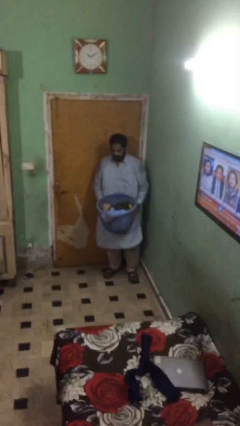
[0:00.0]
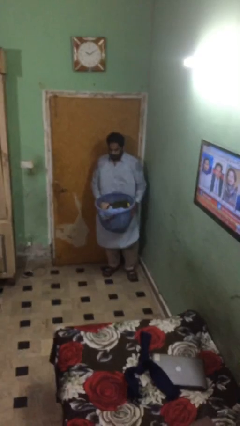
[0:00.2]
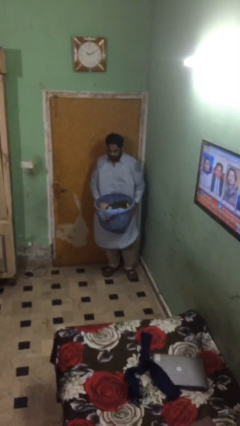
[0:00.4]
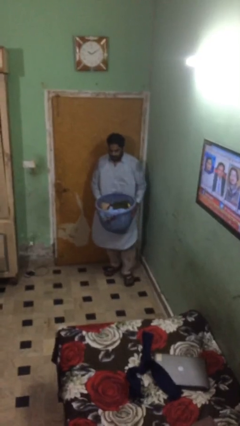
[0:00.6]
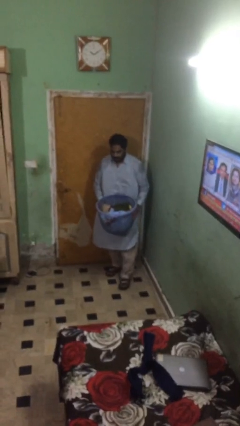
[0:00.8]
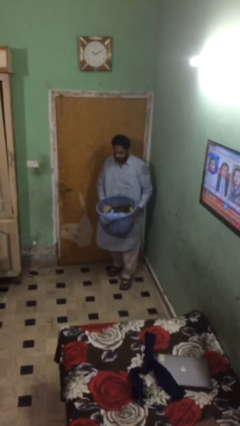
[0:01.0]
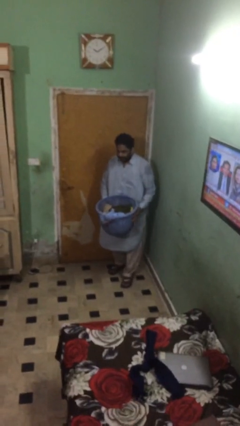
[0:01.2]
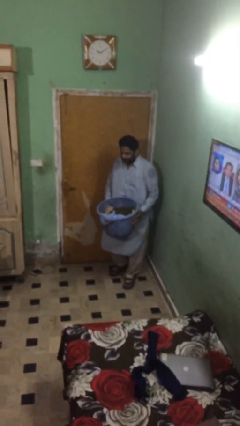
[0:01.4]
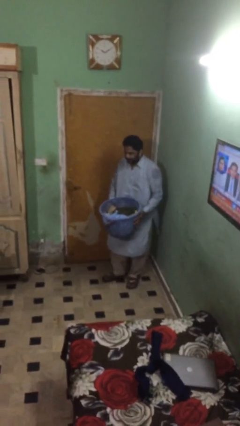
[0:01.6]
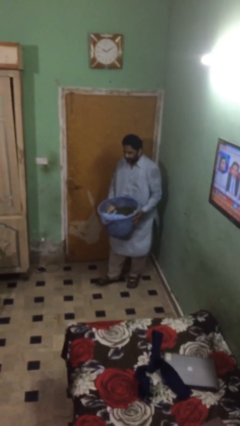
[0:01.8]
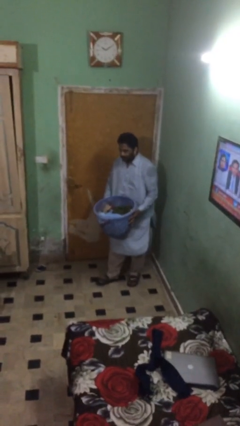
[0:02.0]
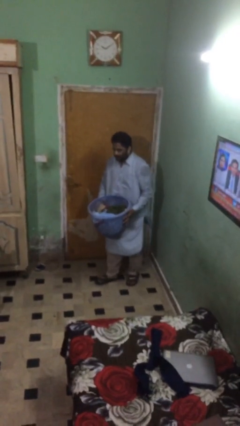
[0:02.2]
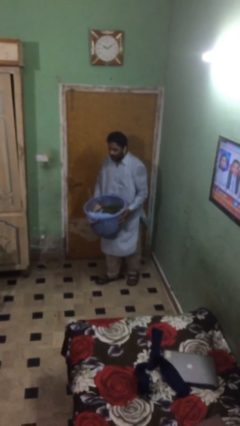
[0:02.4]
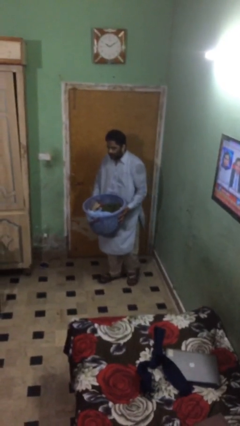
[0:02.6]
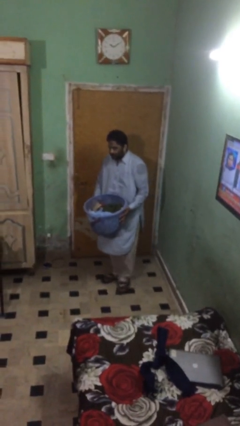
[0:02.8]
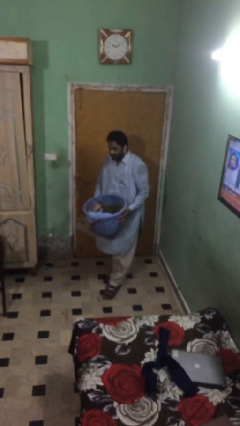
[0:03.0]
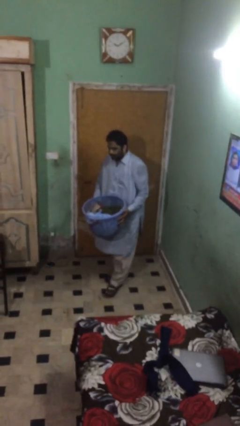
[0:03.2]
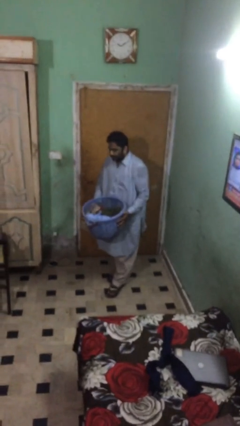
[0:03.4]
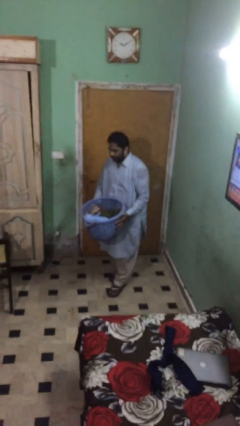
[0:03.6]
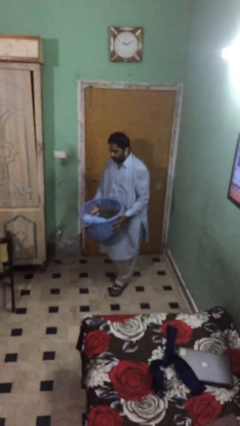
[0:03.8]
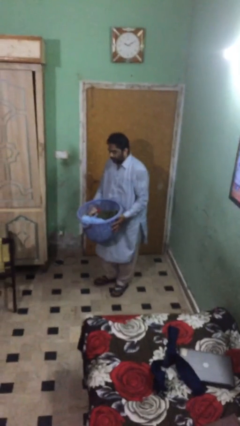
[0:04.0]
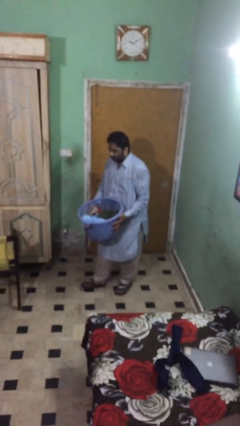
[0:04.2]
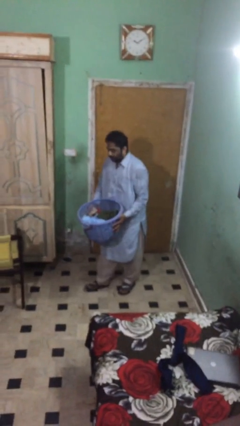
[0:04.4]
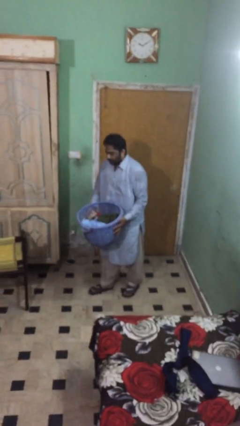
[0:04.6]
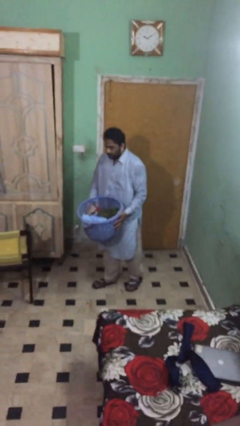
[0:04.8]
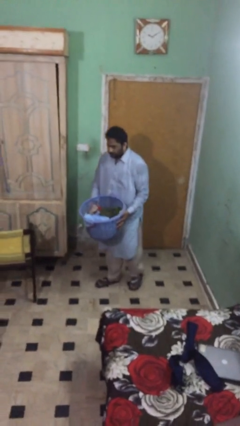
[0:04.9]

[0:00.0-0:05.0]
person carries heavy object

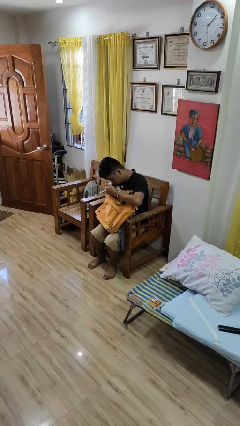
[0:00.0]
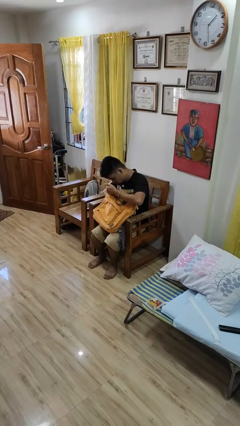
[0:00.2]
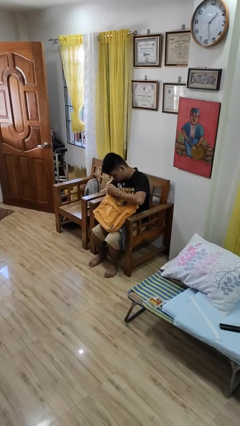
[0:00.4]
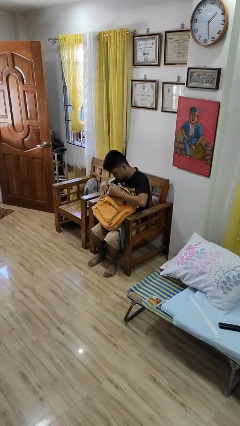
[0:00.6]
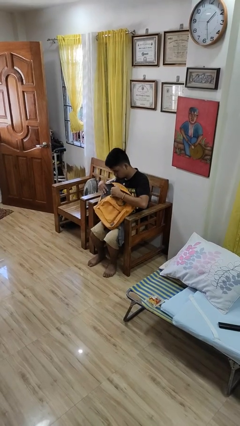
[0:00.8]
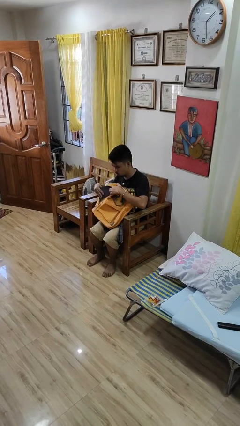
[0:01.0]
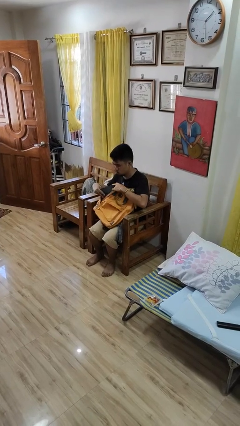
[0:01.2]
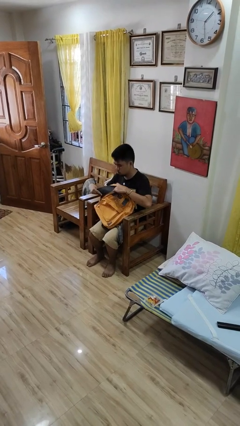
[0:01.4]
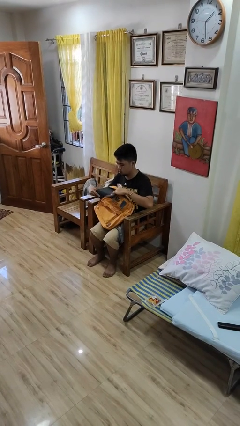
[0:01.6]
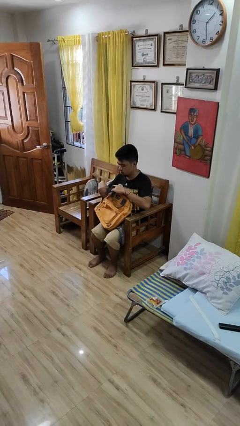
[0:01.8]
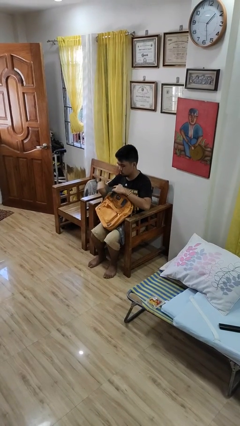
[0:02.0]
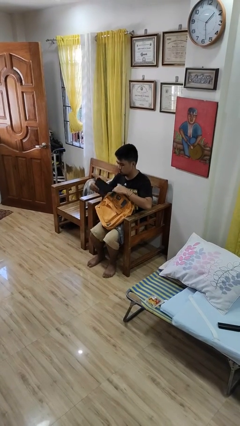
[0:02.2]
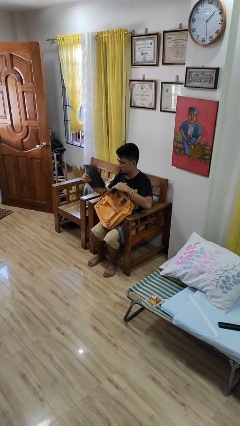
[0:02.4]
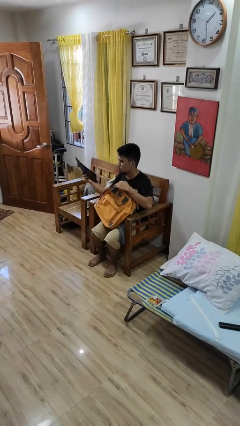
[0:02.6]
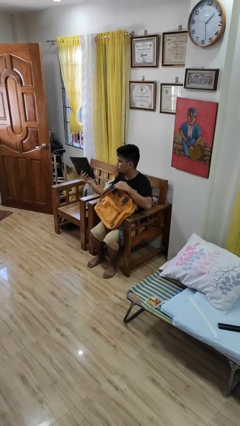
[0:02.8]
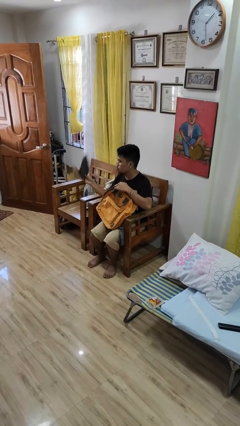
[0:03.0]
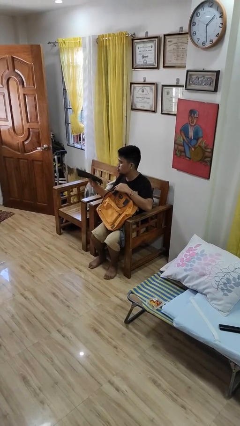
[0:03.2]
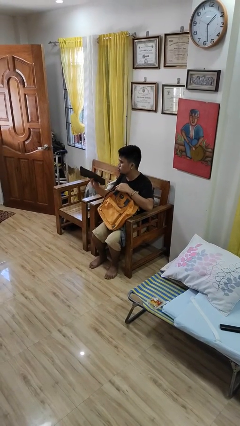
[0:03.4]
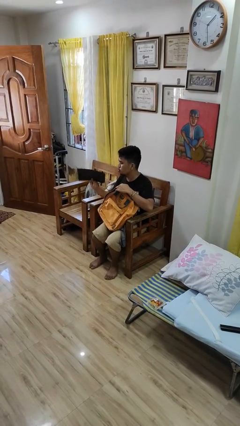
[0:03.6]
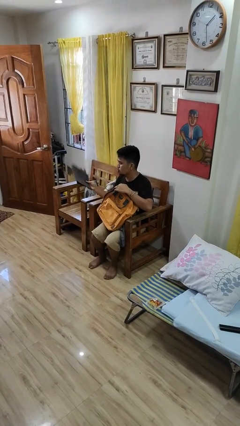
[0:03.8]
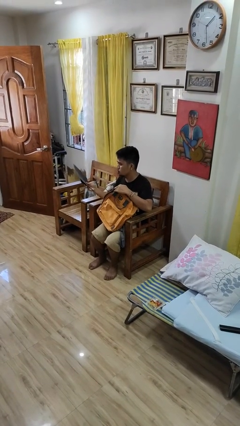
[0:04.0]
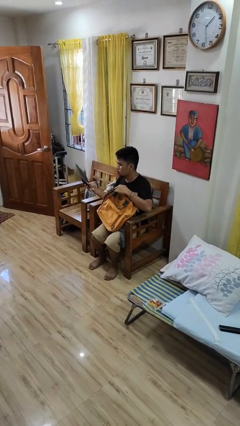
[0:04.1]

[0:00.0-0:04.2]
person takes object from backpack

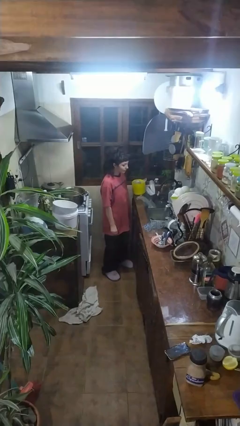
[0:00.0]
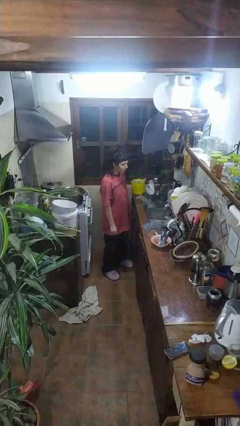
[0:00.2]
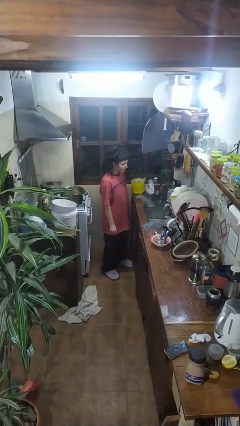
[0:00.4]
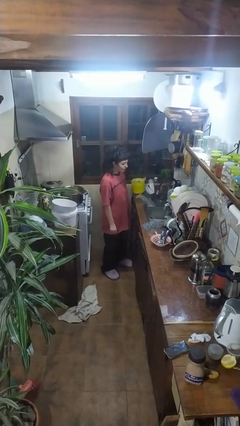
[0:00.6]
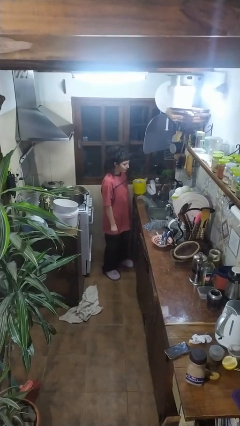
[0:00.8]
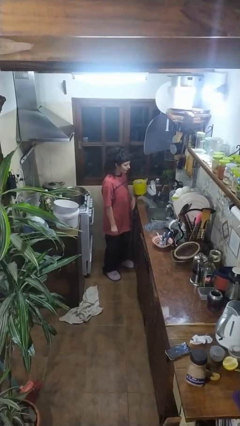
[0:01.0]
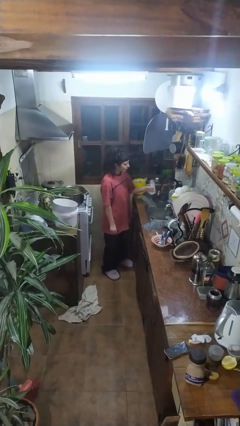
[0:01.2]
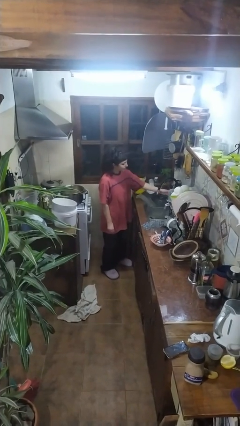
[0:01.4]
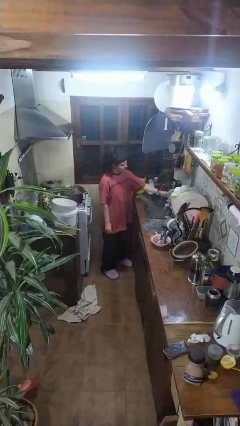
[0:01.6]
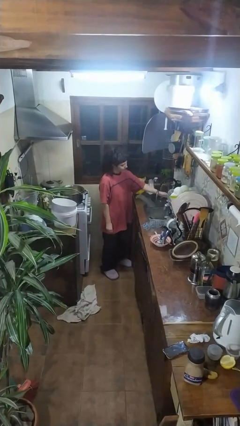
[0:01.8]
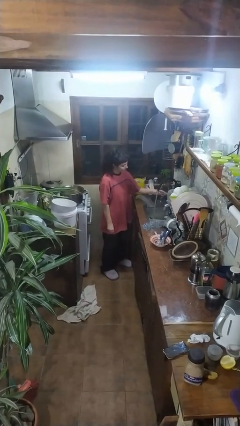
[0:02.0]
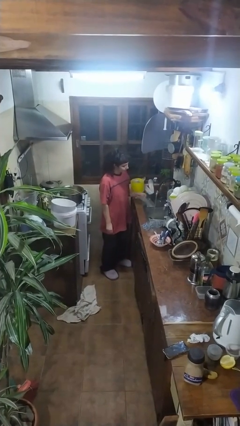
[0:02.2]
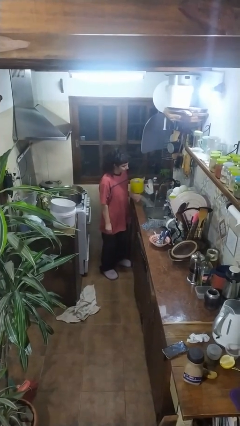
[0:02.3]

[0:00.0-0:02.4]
person opens clothes washer

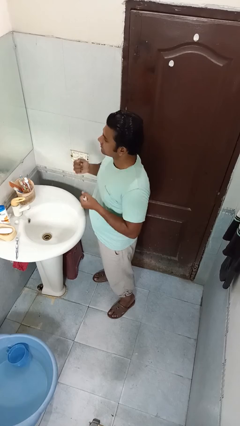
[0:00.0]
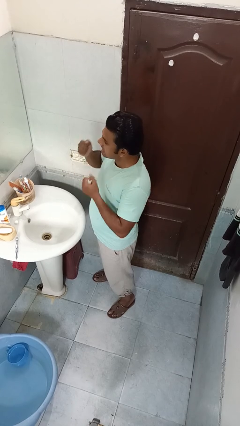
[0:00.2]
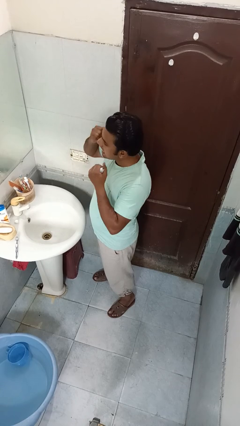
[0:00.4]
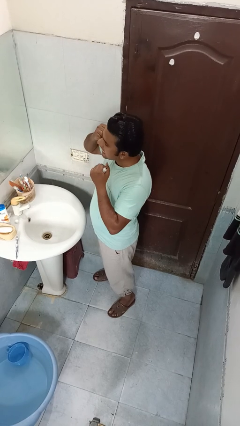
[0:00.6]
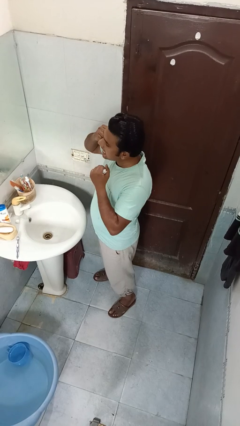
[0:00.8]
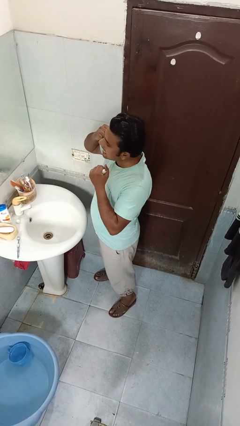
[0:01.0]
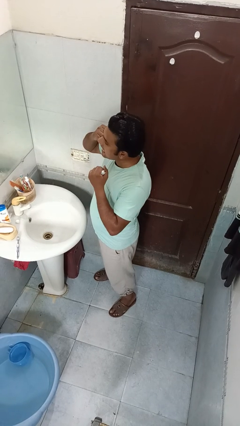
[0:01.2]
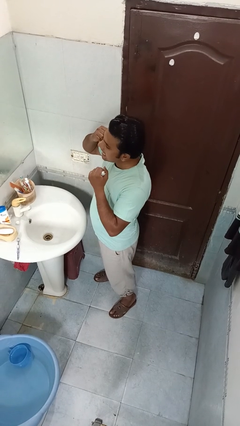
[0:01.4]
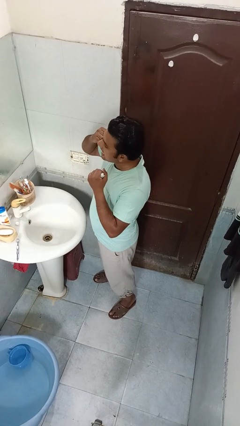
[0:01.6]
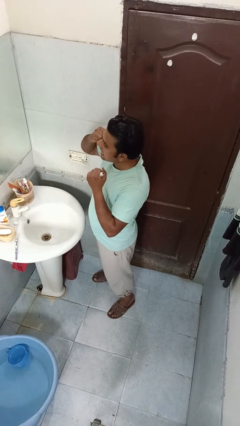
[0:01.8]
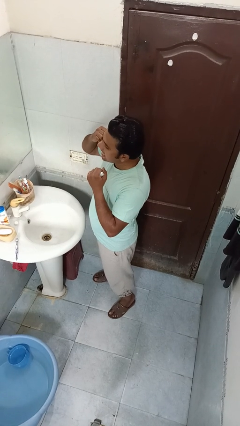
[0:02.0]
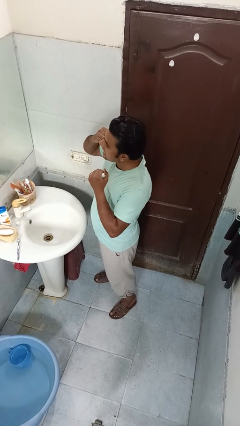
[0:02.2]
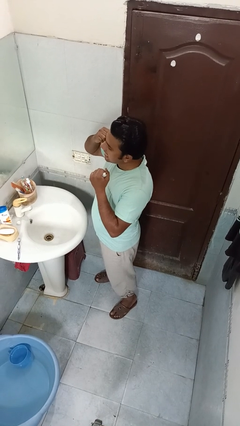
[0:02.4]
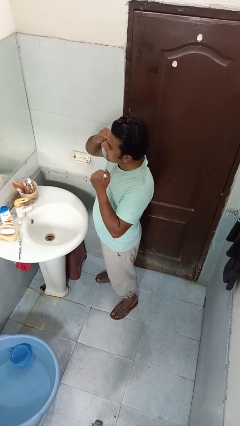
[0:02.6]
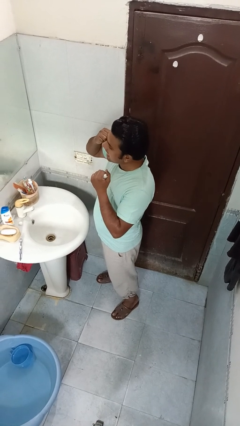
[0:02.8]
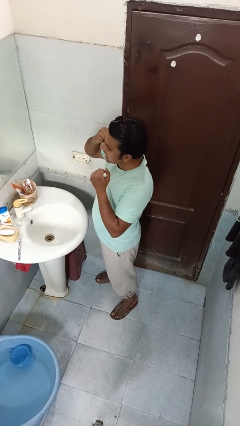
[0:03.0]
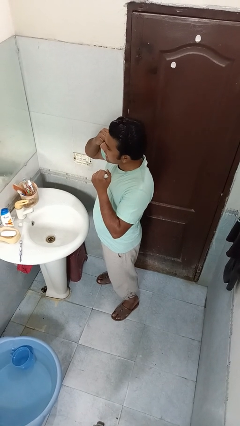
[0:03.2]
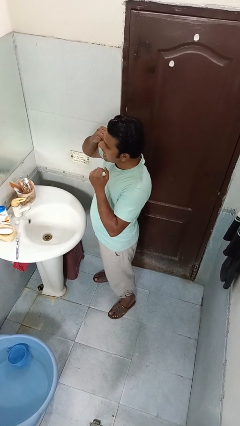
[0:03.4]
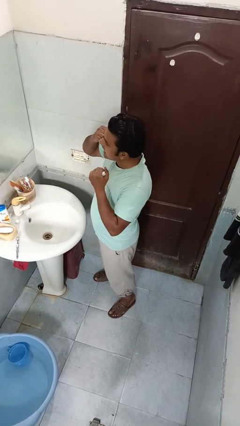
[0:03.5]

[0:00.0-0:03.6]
person flosses

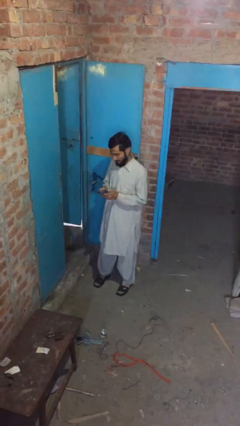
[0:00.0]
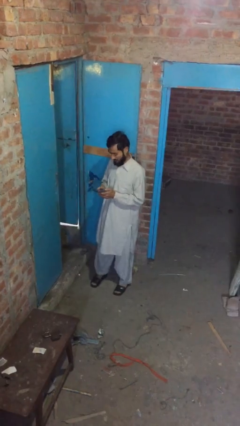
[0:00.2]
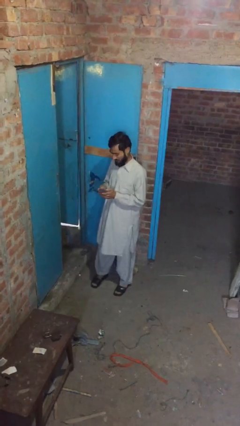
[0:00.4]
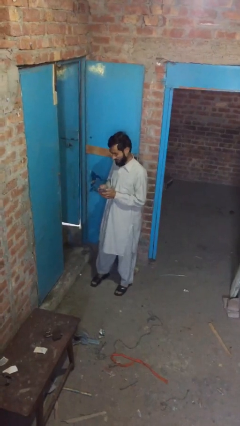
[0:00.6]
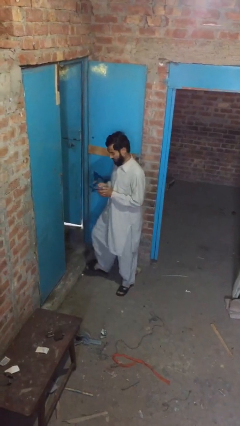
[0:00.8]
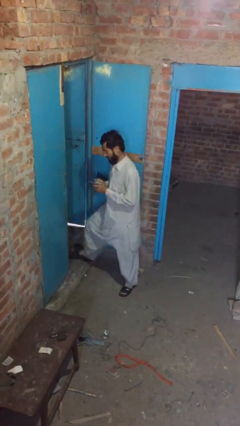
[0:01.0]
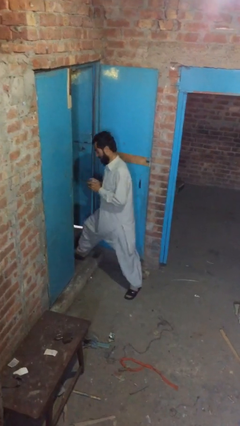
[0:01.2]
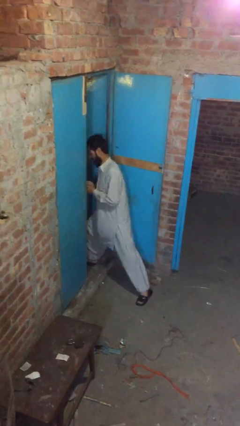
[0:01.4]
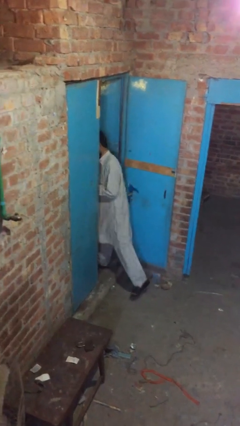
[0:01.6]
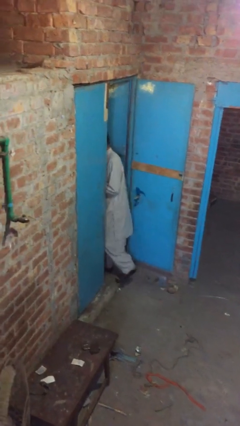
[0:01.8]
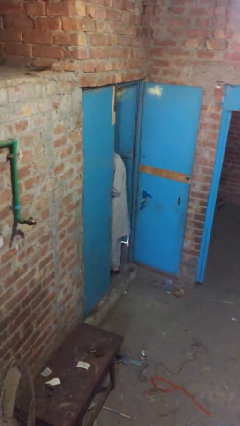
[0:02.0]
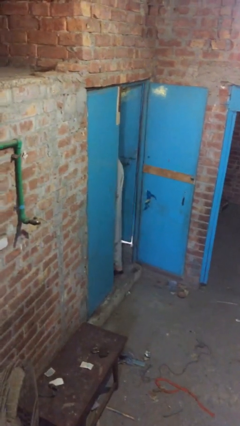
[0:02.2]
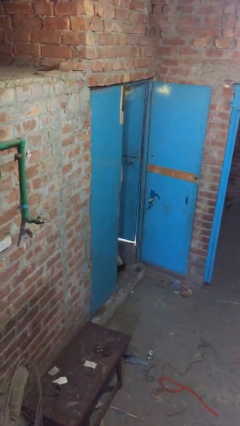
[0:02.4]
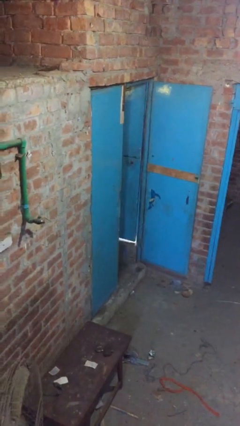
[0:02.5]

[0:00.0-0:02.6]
person exits scene through structure
